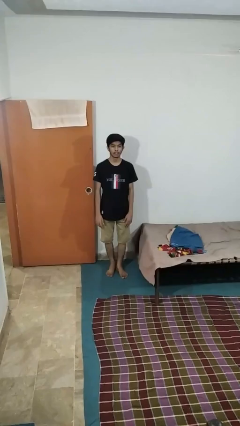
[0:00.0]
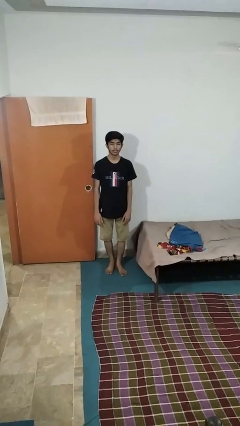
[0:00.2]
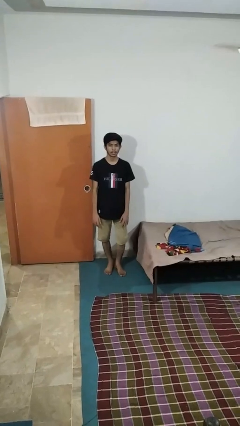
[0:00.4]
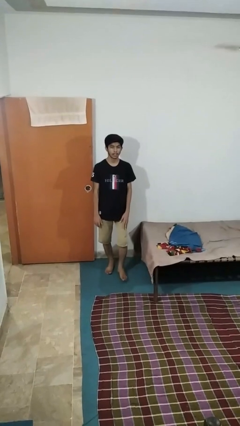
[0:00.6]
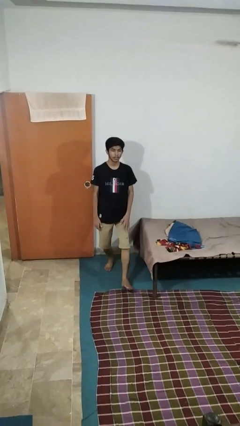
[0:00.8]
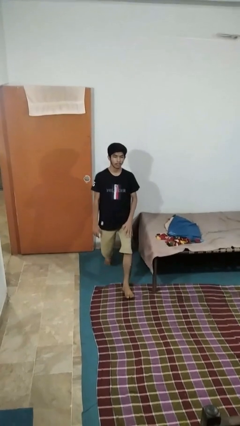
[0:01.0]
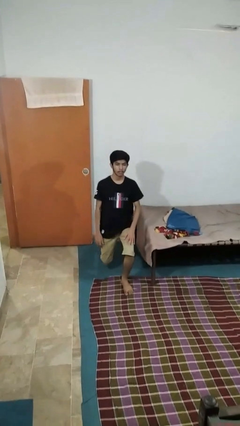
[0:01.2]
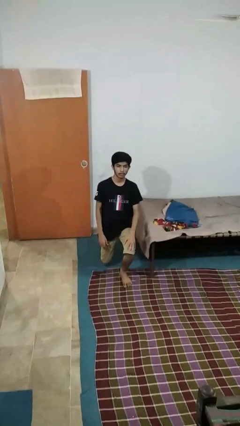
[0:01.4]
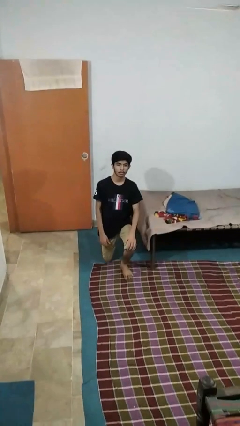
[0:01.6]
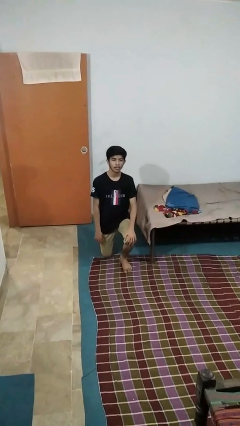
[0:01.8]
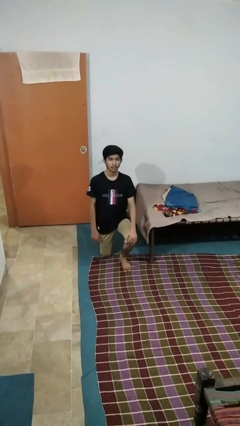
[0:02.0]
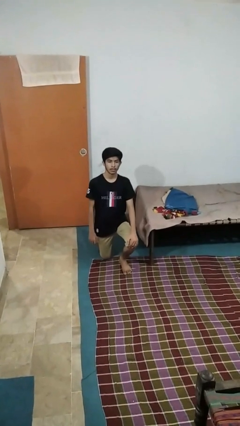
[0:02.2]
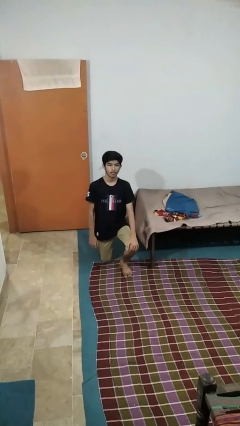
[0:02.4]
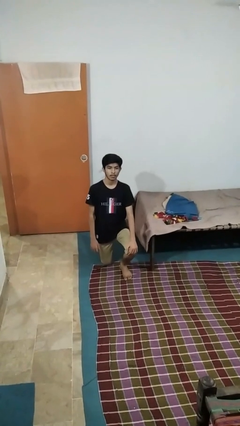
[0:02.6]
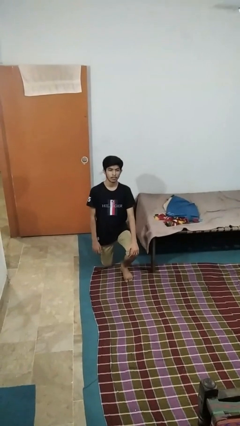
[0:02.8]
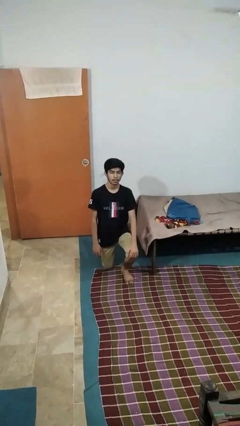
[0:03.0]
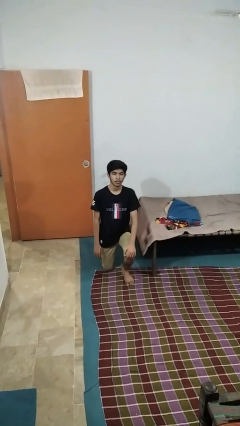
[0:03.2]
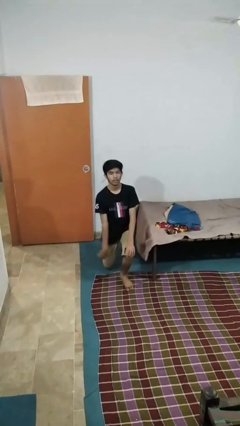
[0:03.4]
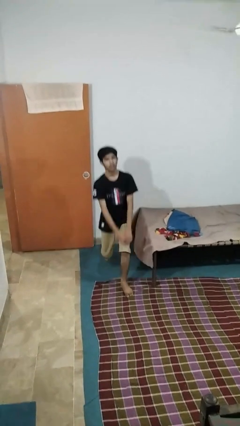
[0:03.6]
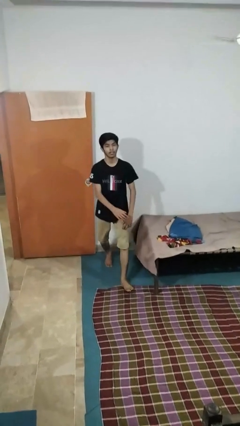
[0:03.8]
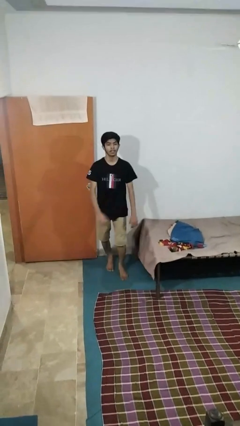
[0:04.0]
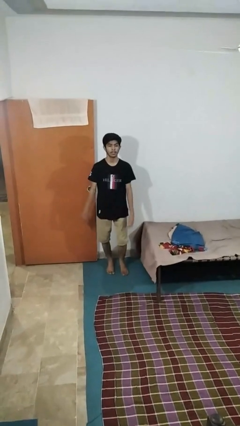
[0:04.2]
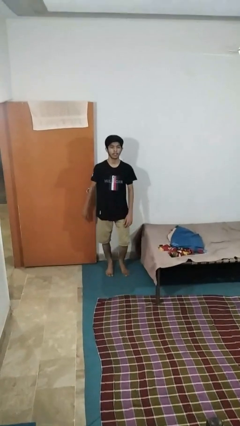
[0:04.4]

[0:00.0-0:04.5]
person kneels

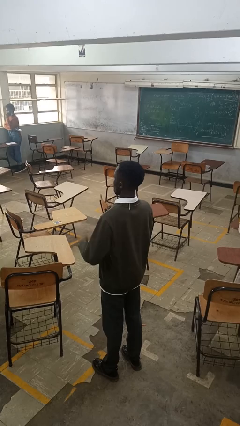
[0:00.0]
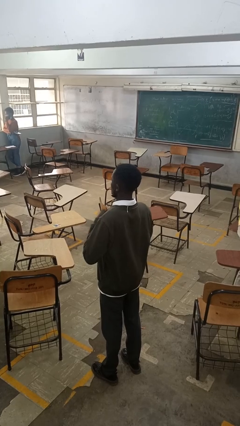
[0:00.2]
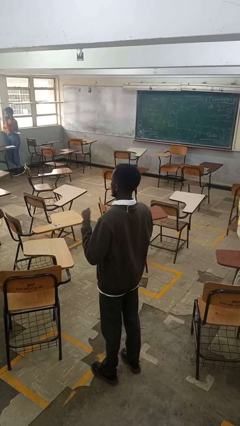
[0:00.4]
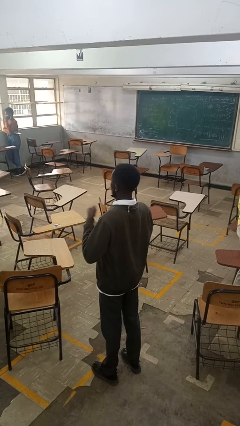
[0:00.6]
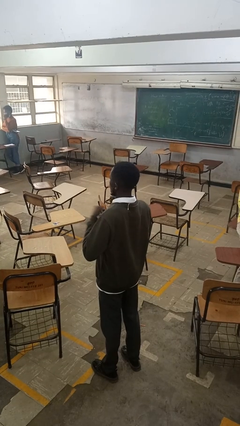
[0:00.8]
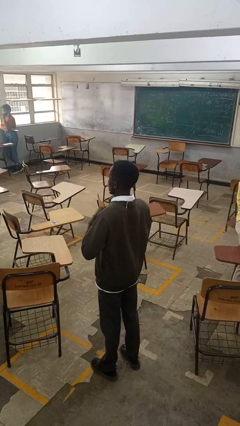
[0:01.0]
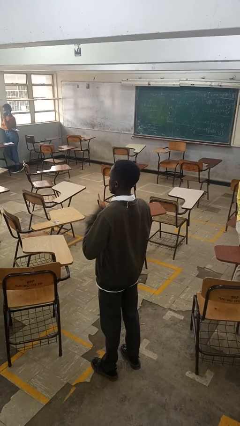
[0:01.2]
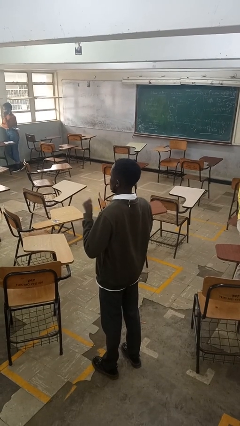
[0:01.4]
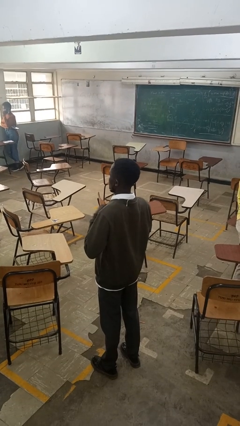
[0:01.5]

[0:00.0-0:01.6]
person drums on chest

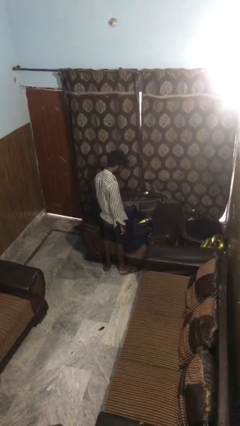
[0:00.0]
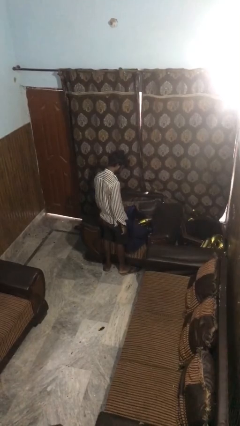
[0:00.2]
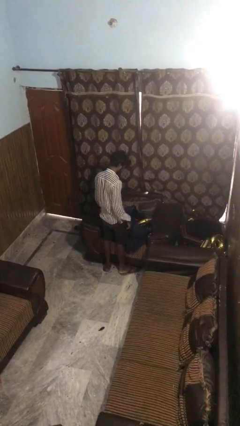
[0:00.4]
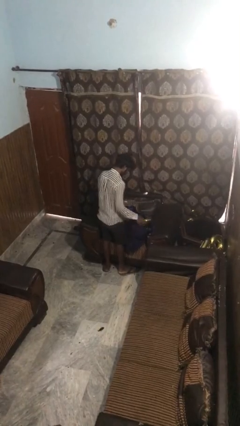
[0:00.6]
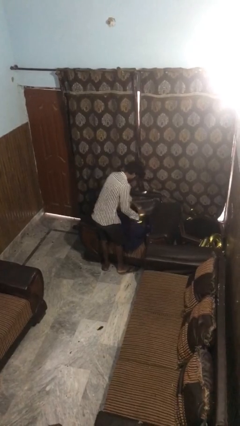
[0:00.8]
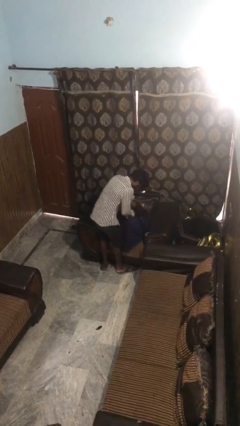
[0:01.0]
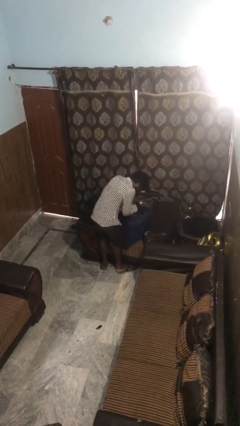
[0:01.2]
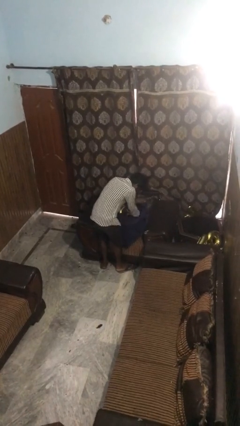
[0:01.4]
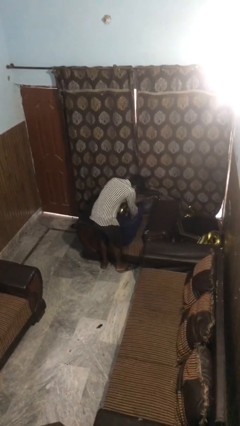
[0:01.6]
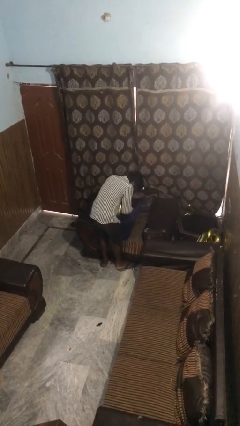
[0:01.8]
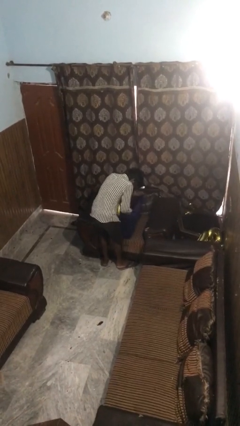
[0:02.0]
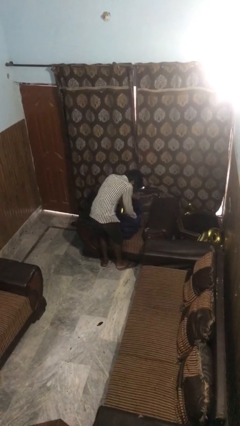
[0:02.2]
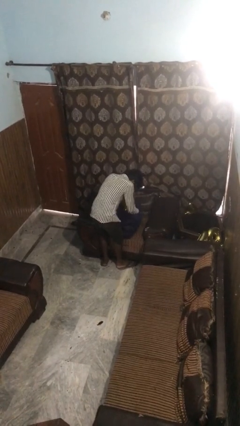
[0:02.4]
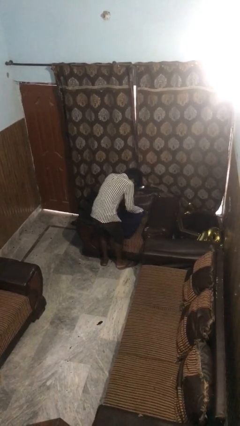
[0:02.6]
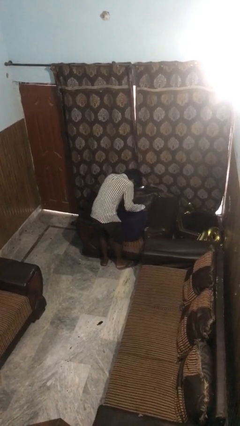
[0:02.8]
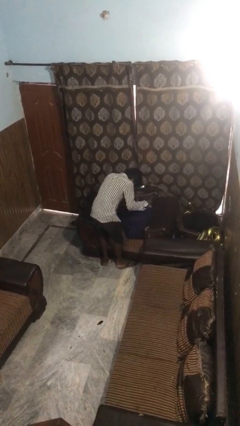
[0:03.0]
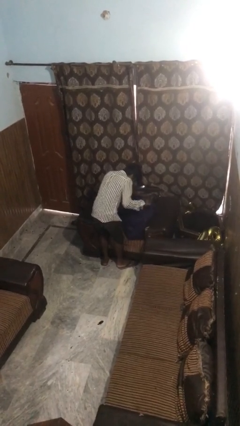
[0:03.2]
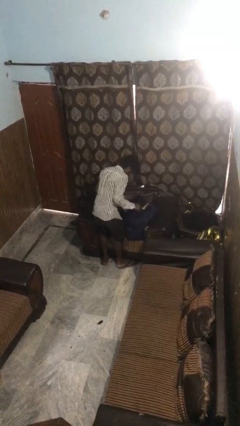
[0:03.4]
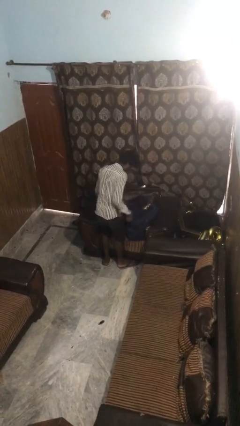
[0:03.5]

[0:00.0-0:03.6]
person searches in bag

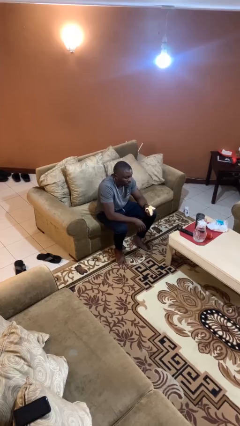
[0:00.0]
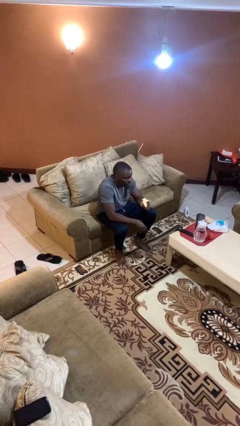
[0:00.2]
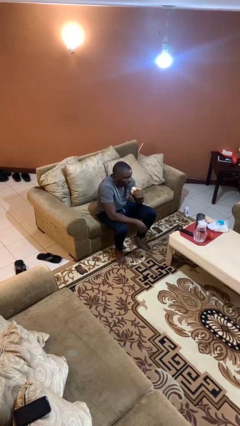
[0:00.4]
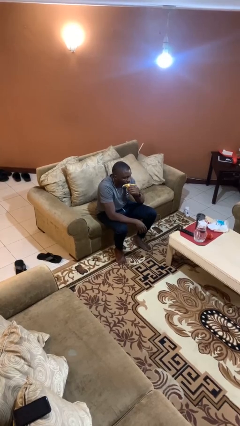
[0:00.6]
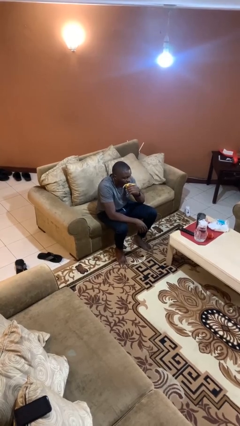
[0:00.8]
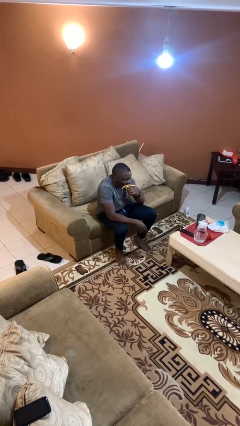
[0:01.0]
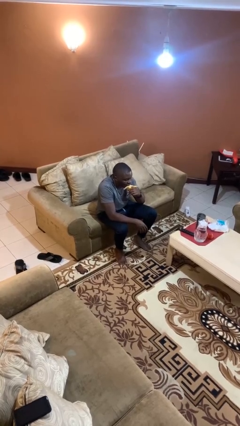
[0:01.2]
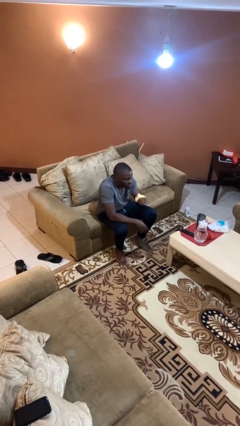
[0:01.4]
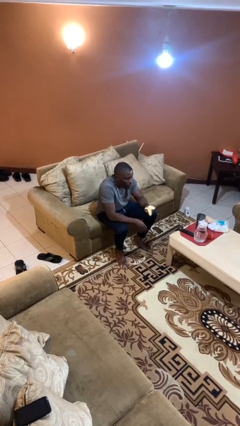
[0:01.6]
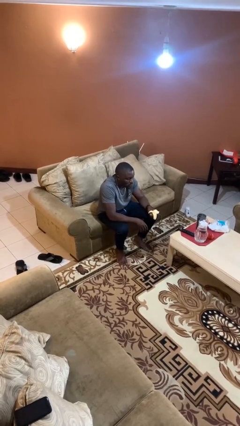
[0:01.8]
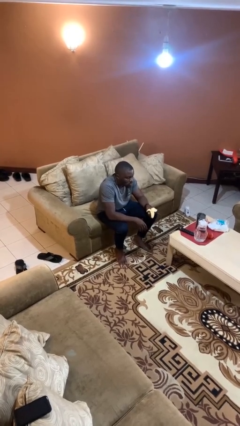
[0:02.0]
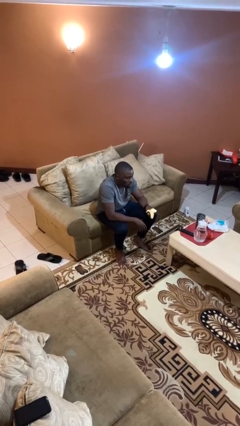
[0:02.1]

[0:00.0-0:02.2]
person eats banana

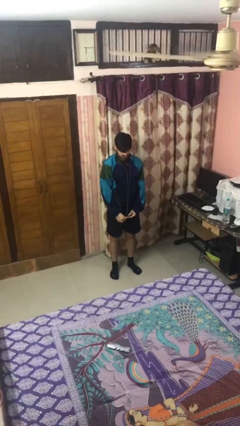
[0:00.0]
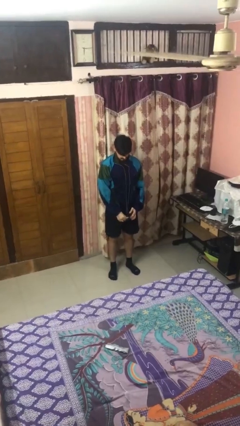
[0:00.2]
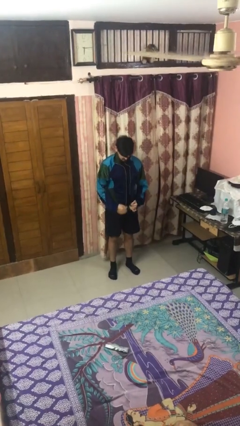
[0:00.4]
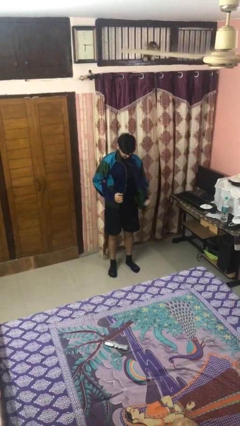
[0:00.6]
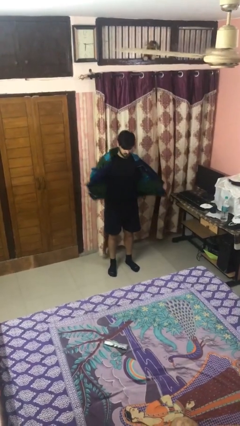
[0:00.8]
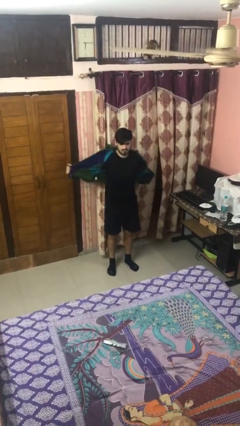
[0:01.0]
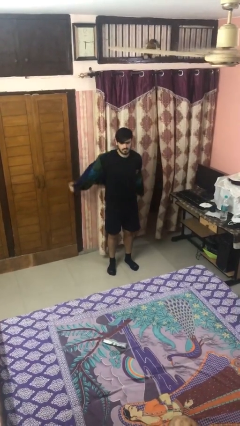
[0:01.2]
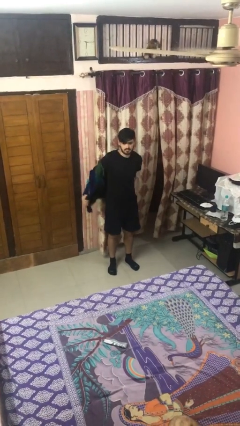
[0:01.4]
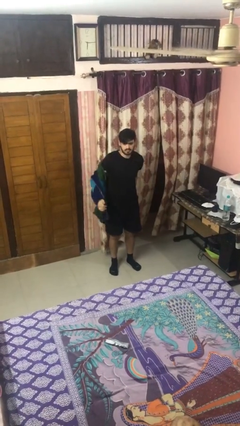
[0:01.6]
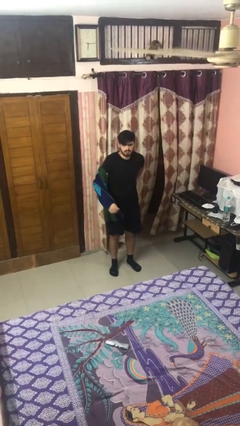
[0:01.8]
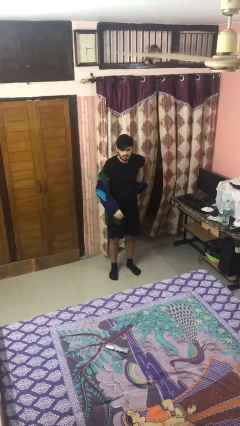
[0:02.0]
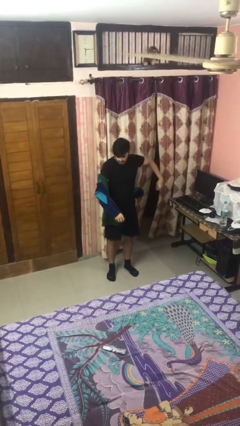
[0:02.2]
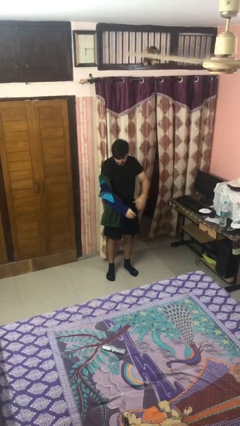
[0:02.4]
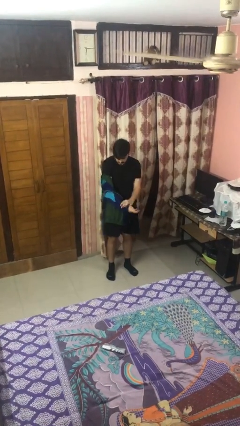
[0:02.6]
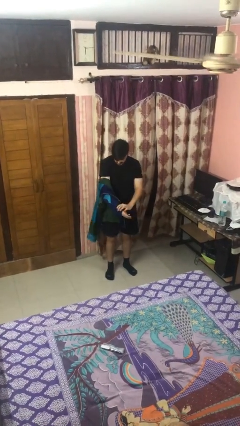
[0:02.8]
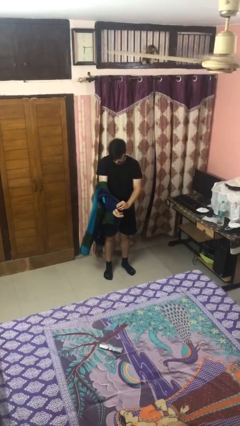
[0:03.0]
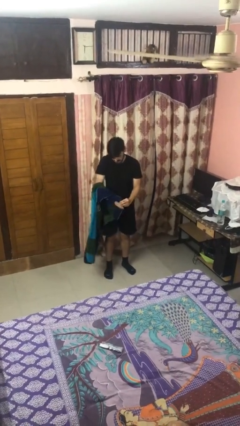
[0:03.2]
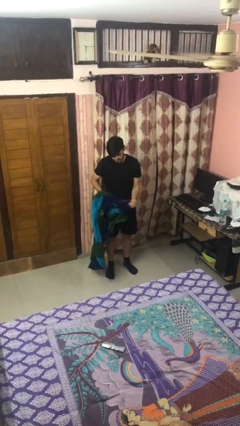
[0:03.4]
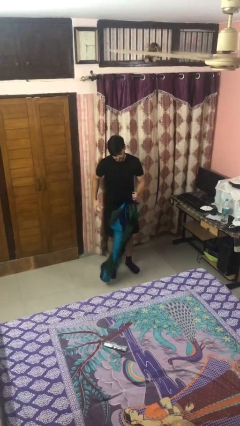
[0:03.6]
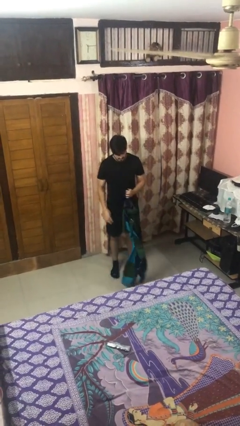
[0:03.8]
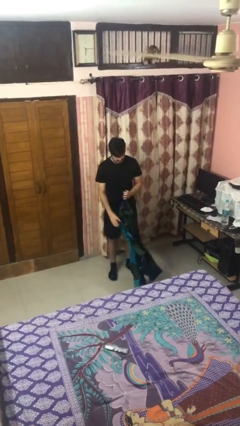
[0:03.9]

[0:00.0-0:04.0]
person takes off jacket

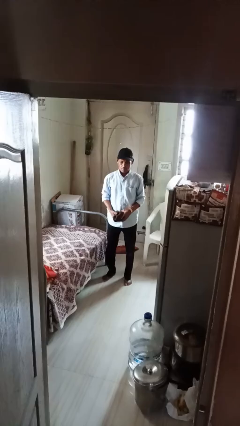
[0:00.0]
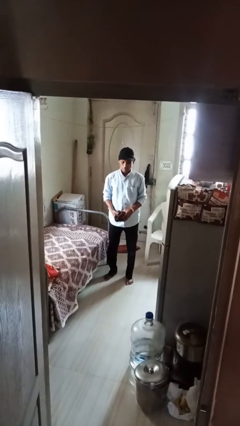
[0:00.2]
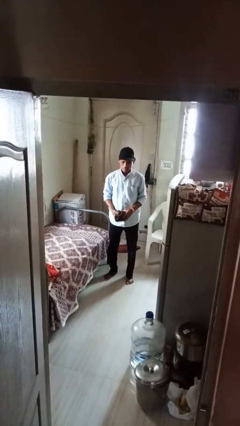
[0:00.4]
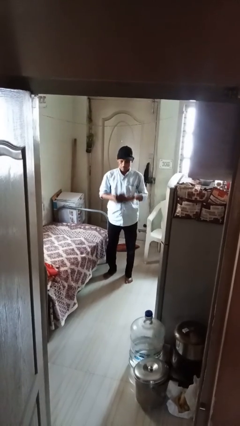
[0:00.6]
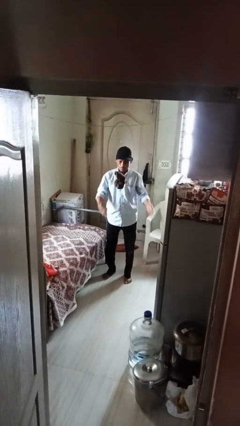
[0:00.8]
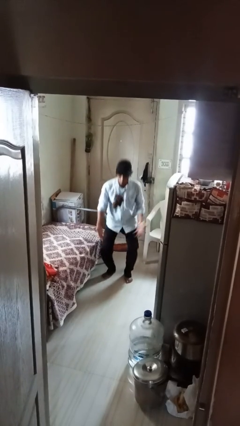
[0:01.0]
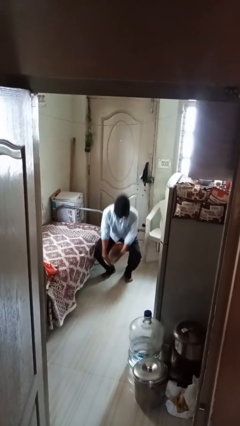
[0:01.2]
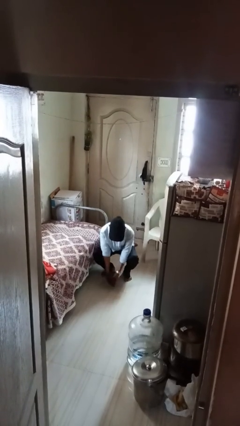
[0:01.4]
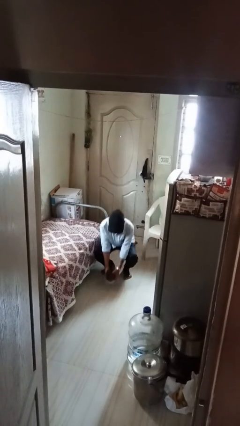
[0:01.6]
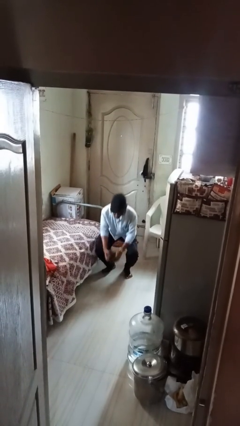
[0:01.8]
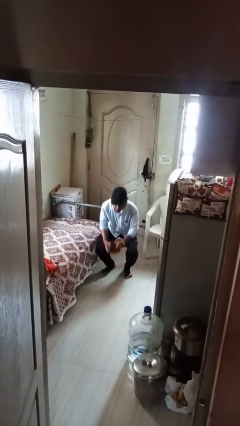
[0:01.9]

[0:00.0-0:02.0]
person drops object
